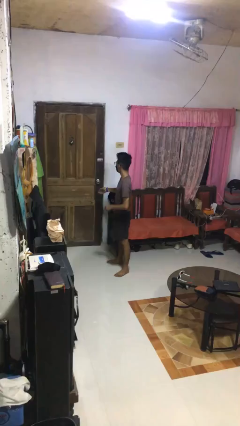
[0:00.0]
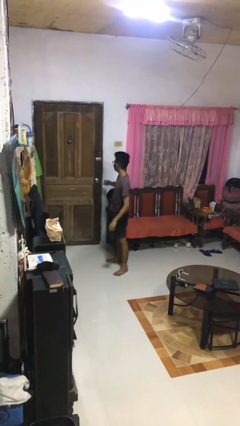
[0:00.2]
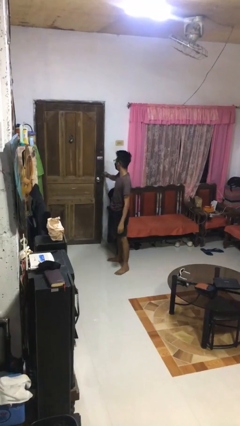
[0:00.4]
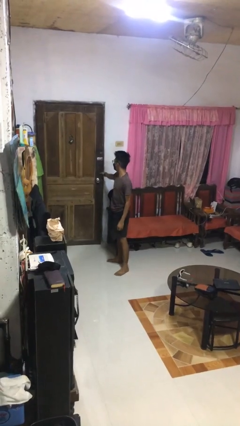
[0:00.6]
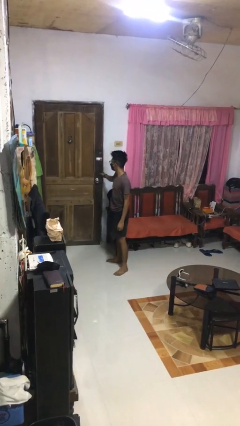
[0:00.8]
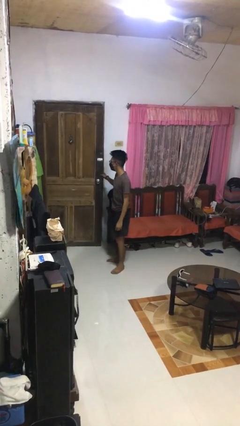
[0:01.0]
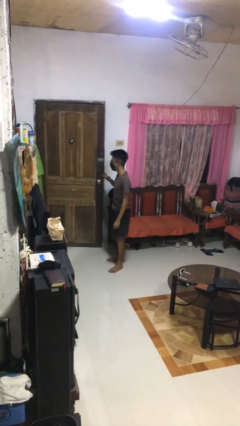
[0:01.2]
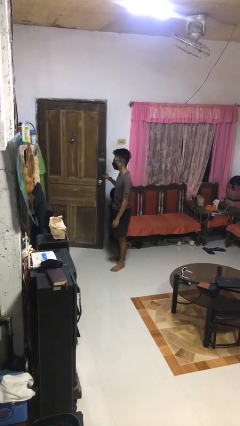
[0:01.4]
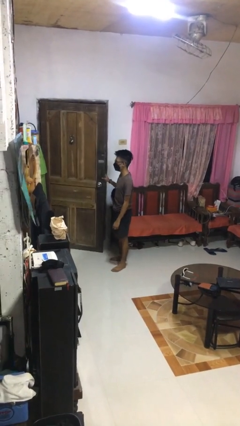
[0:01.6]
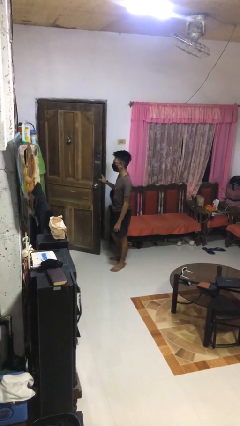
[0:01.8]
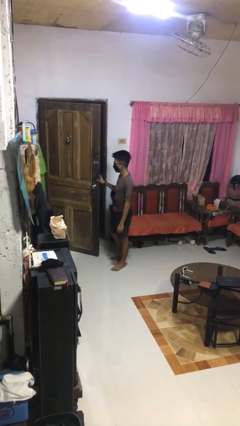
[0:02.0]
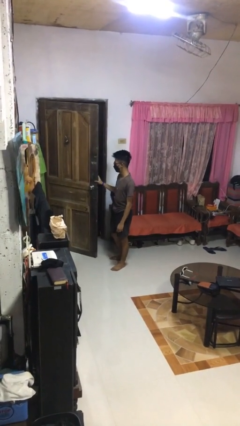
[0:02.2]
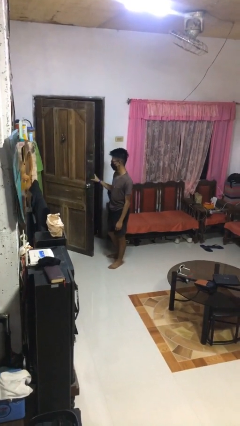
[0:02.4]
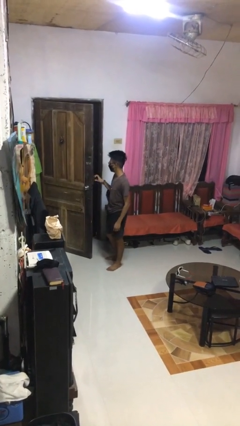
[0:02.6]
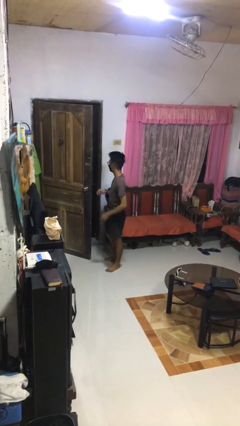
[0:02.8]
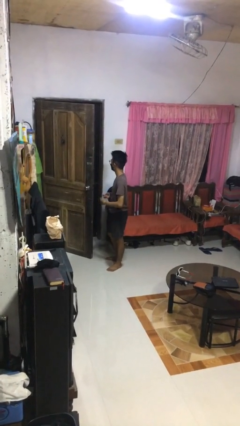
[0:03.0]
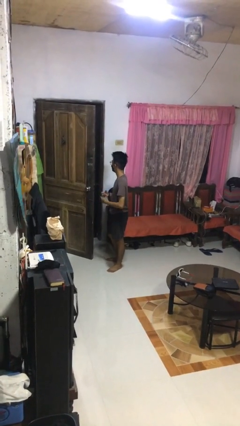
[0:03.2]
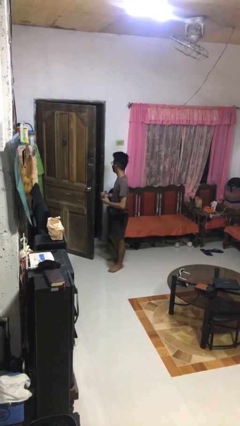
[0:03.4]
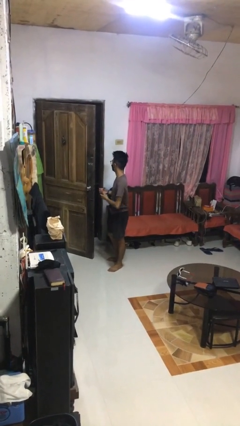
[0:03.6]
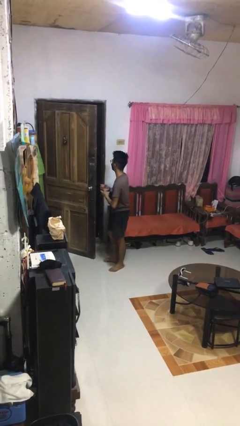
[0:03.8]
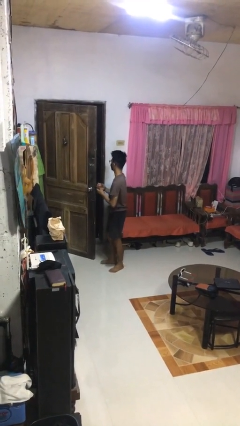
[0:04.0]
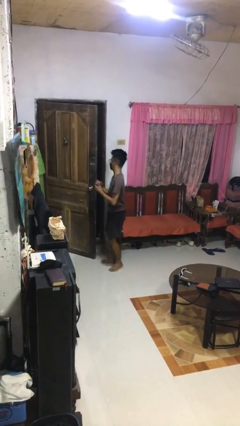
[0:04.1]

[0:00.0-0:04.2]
person opens facility door

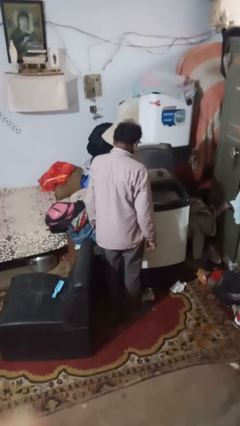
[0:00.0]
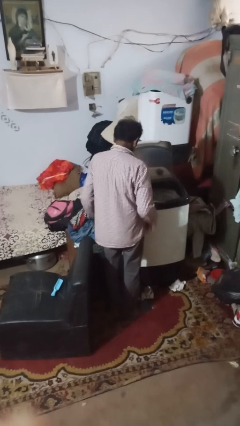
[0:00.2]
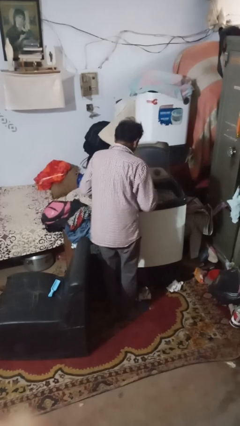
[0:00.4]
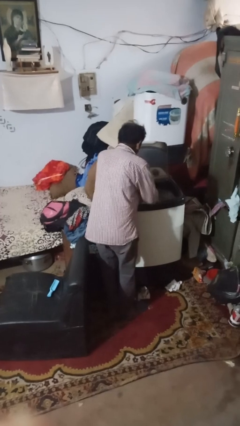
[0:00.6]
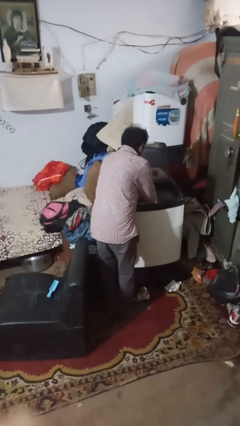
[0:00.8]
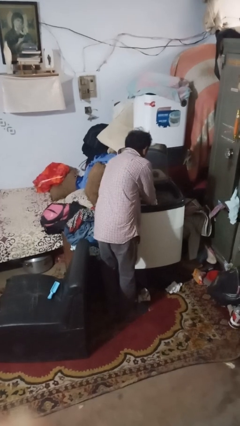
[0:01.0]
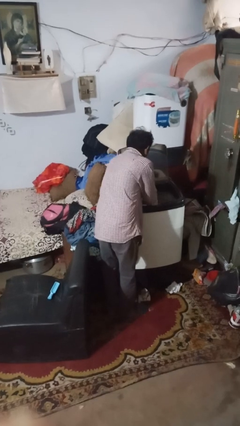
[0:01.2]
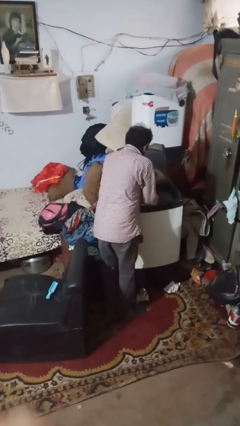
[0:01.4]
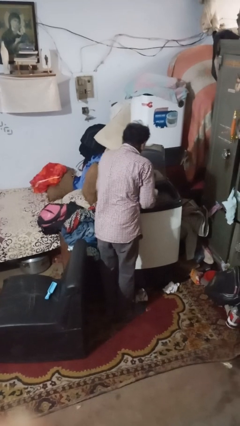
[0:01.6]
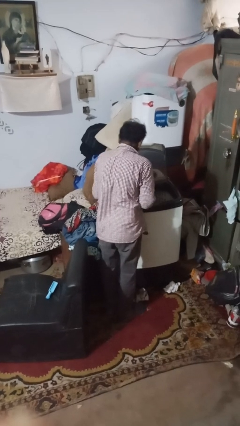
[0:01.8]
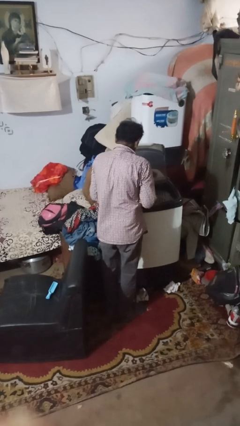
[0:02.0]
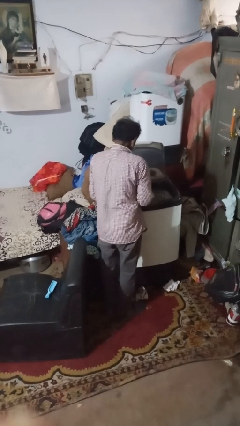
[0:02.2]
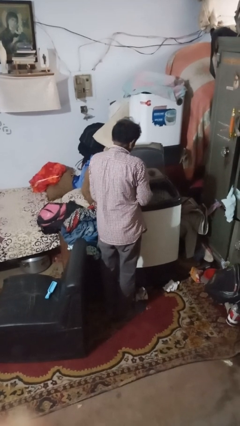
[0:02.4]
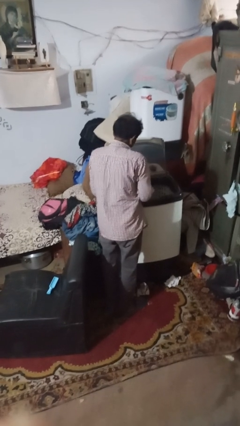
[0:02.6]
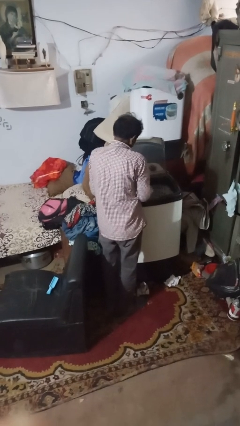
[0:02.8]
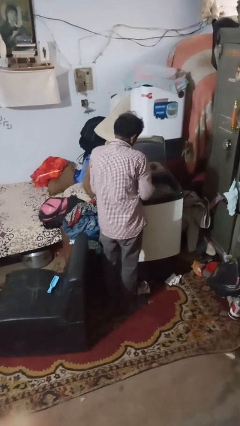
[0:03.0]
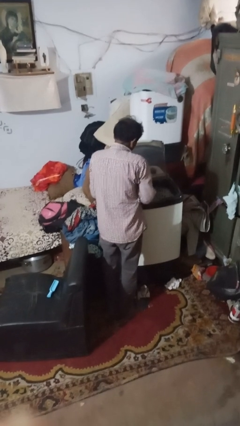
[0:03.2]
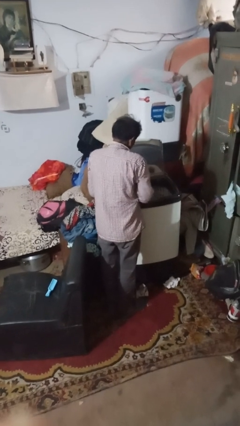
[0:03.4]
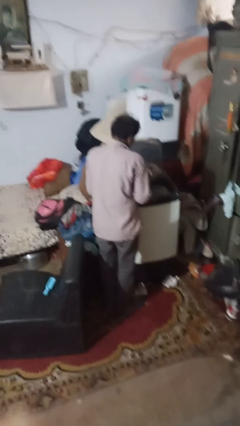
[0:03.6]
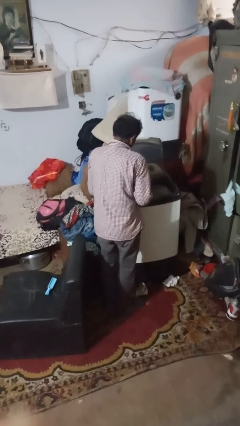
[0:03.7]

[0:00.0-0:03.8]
person cleans dryer lint trap

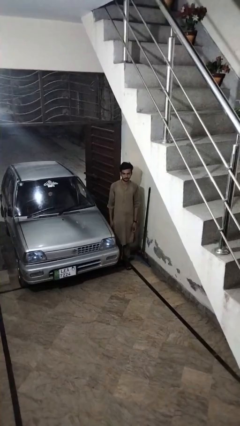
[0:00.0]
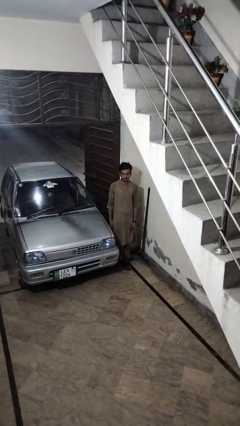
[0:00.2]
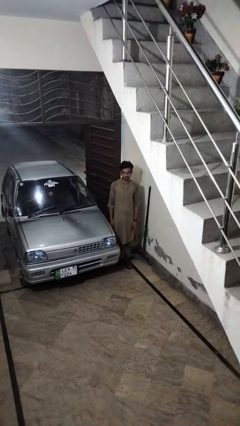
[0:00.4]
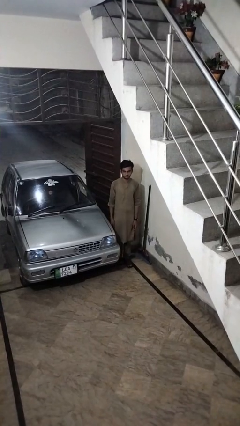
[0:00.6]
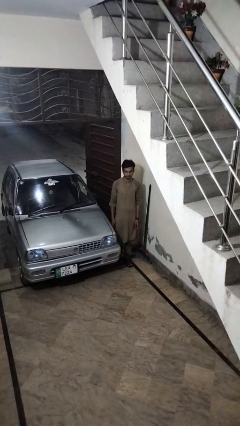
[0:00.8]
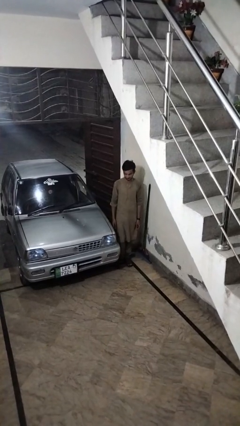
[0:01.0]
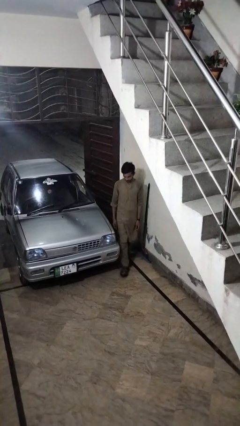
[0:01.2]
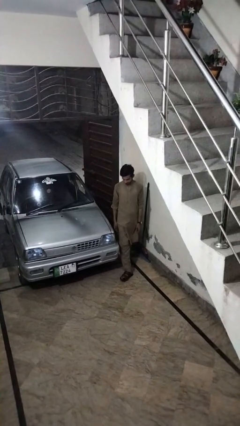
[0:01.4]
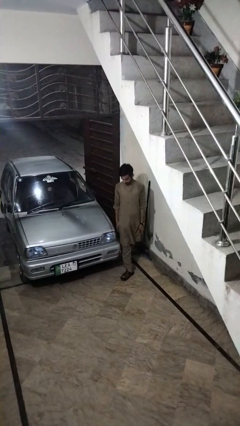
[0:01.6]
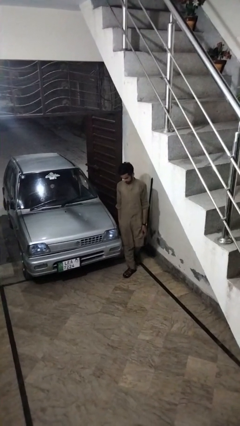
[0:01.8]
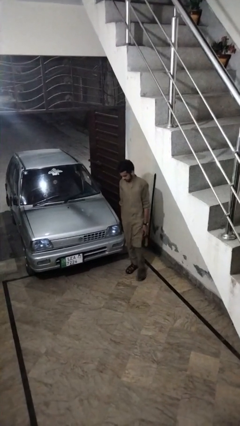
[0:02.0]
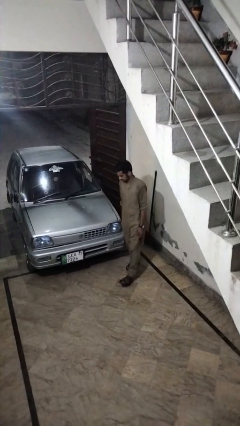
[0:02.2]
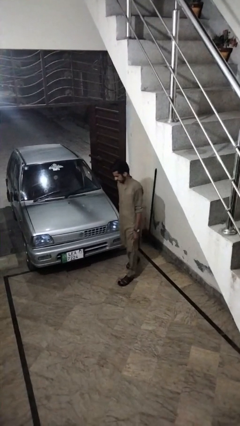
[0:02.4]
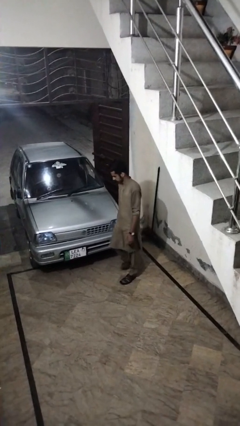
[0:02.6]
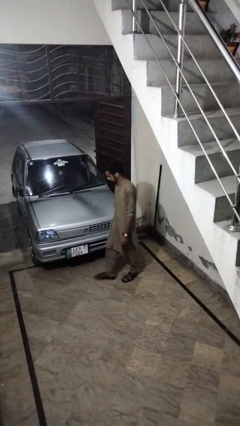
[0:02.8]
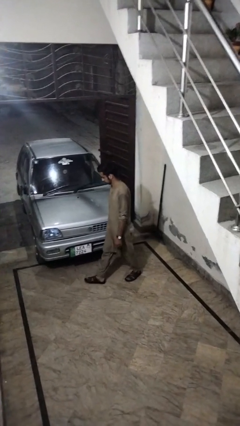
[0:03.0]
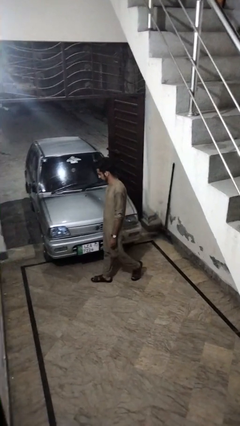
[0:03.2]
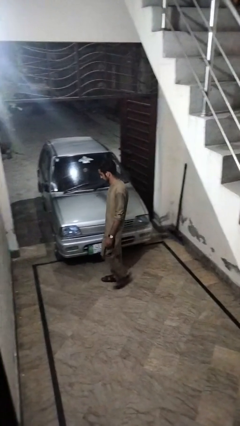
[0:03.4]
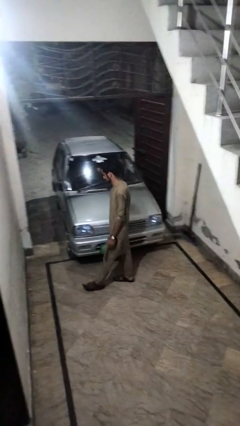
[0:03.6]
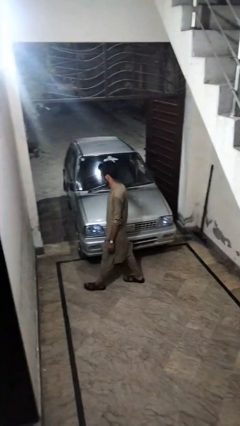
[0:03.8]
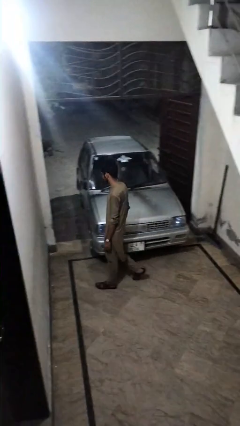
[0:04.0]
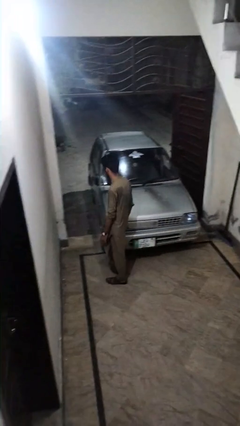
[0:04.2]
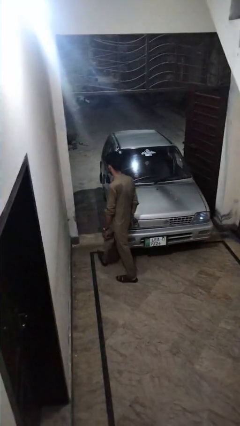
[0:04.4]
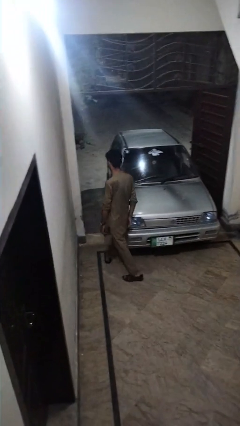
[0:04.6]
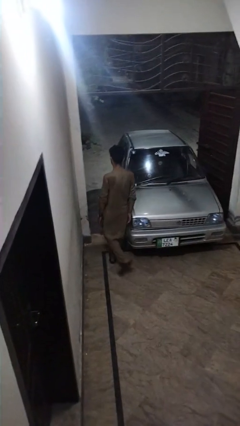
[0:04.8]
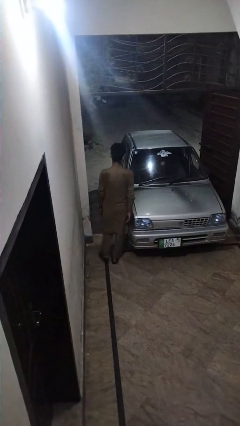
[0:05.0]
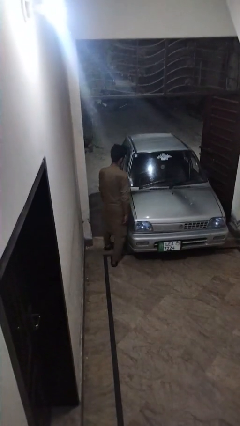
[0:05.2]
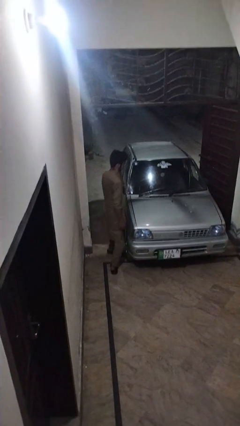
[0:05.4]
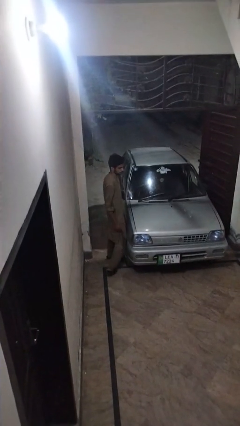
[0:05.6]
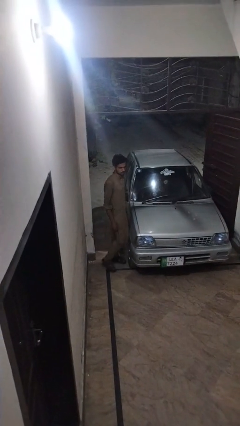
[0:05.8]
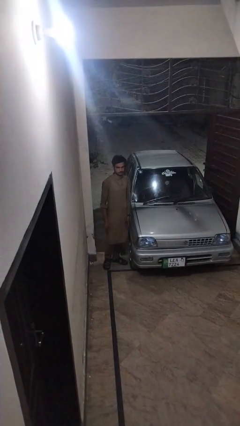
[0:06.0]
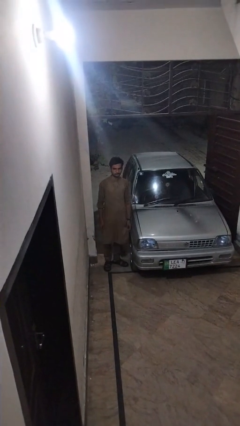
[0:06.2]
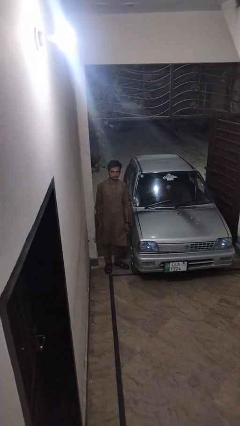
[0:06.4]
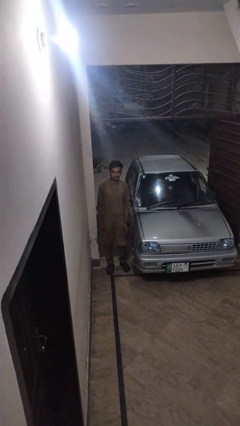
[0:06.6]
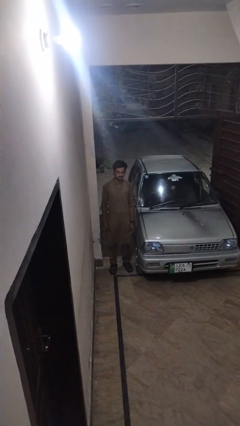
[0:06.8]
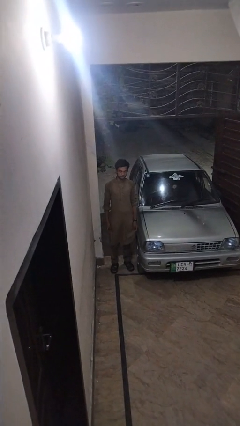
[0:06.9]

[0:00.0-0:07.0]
person walks around car

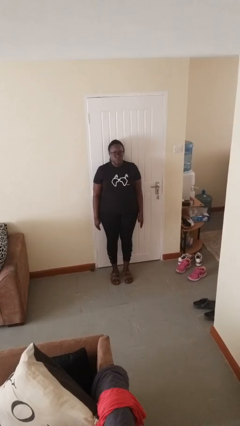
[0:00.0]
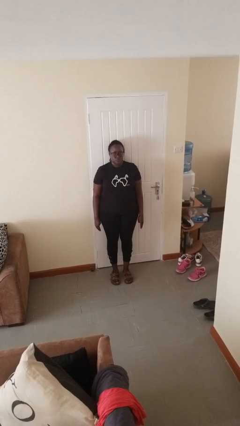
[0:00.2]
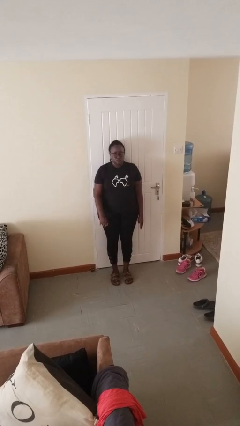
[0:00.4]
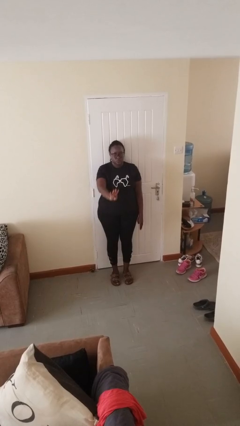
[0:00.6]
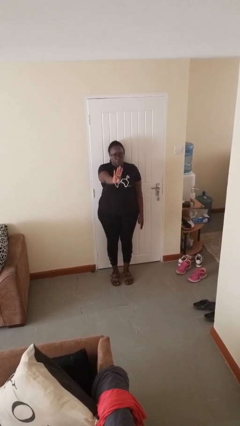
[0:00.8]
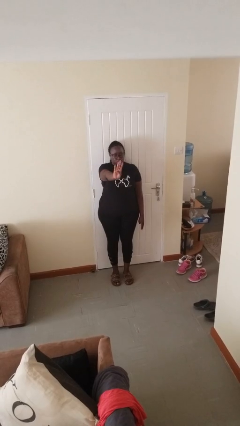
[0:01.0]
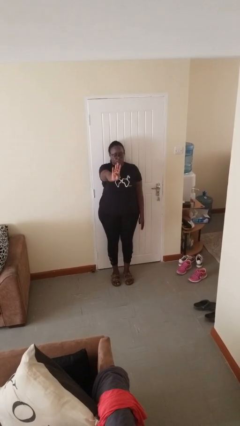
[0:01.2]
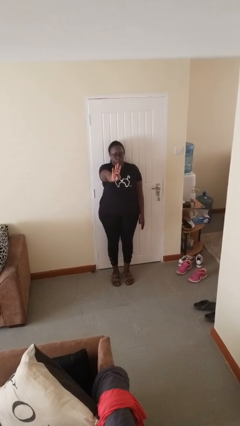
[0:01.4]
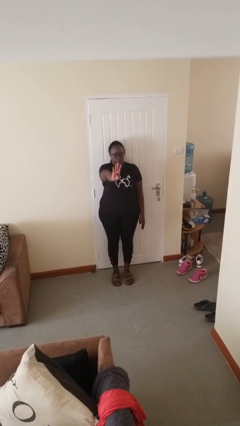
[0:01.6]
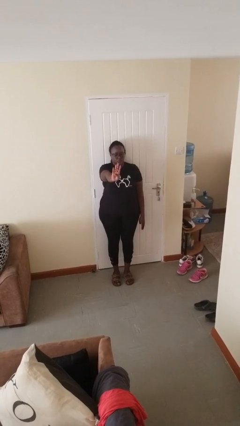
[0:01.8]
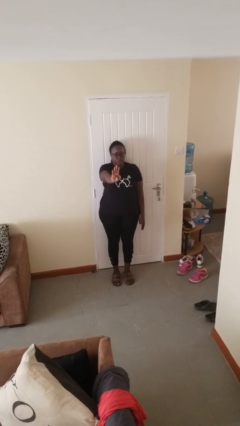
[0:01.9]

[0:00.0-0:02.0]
person gestures number four

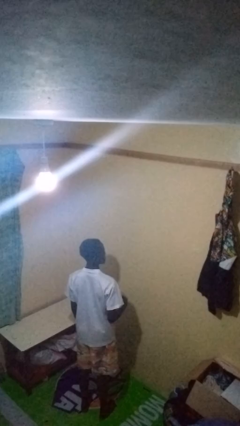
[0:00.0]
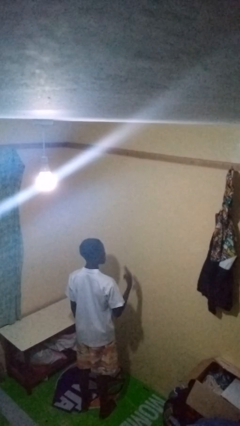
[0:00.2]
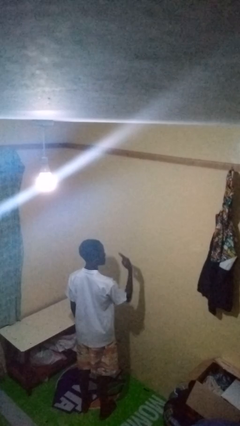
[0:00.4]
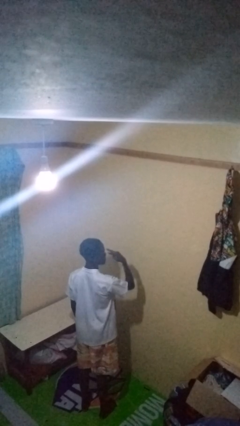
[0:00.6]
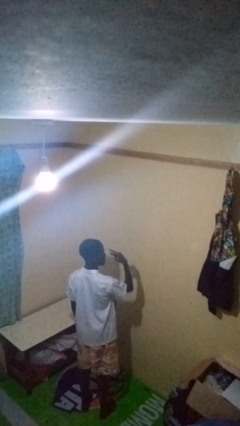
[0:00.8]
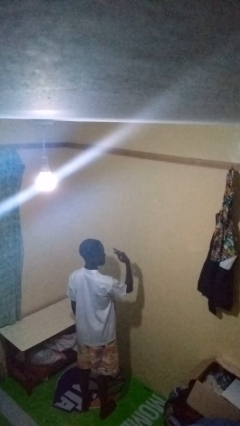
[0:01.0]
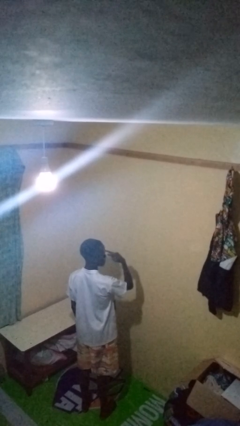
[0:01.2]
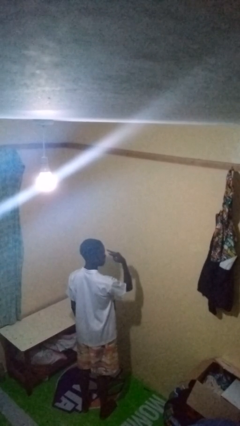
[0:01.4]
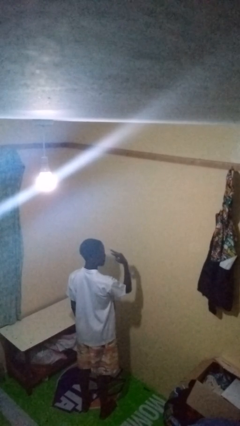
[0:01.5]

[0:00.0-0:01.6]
person gestures watch closely
